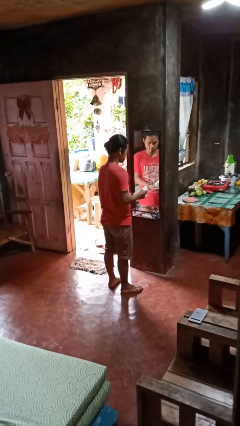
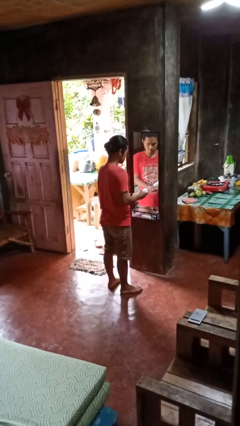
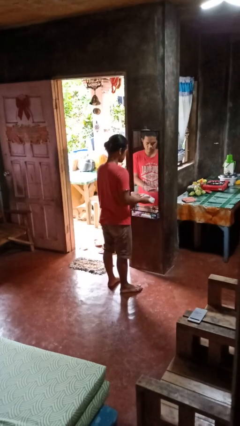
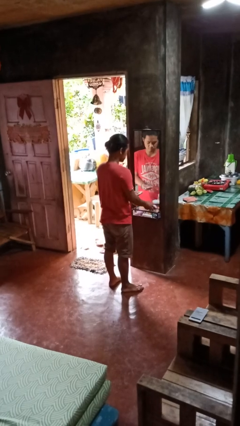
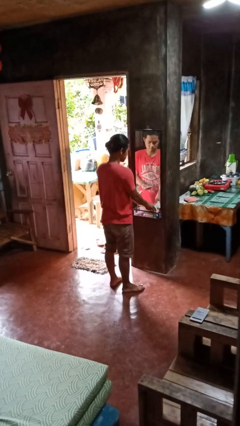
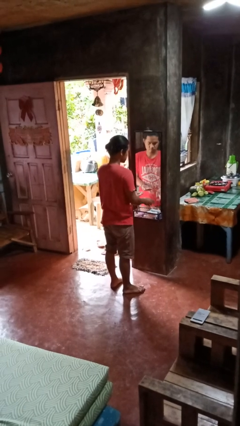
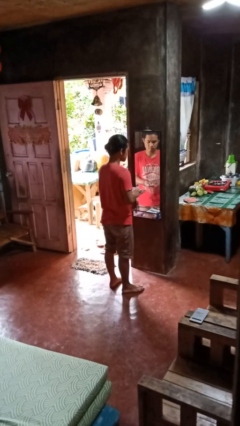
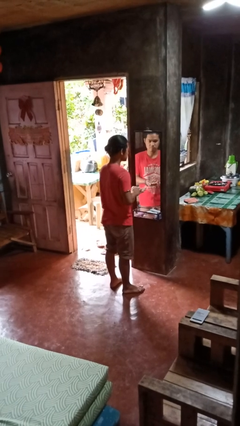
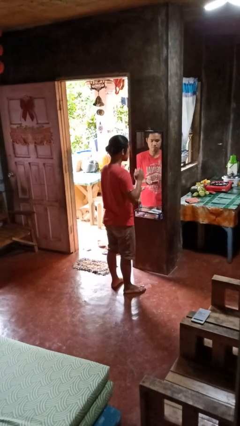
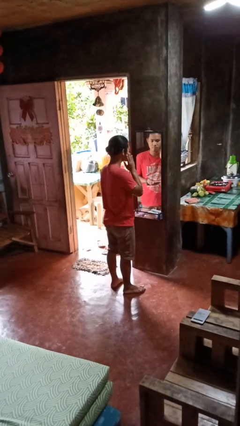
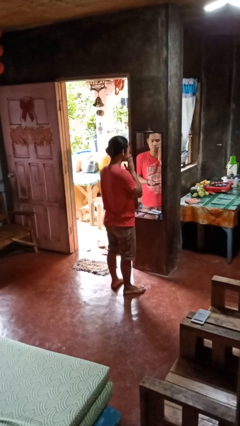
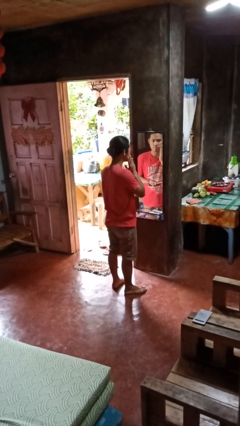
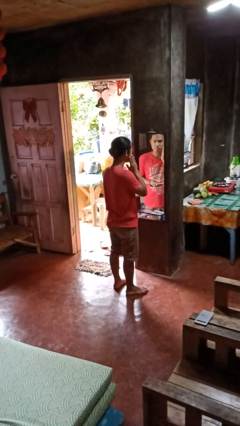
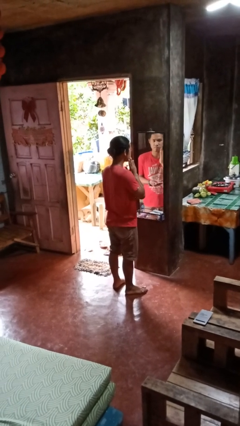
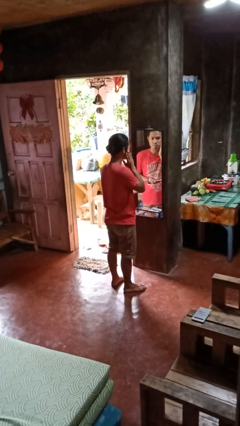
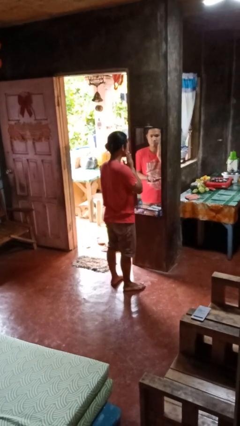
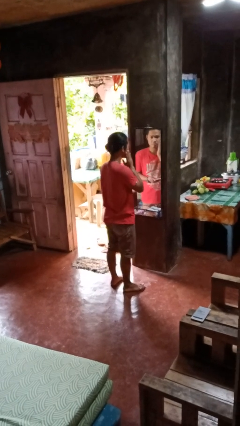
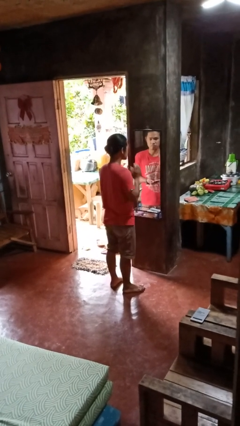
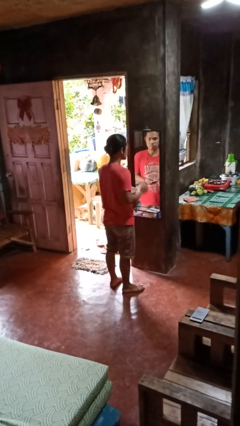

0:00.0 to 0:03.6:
person applies foundation makeup

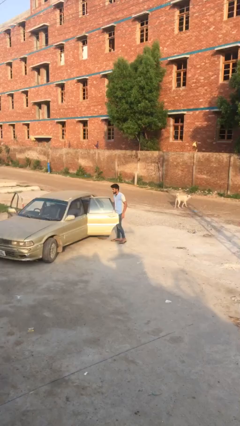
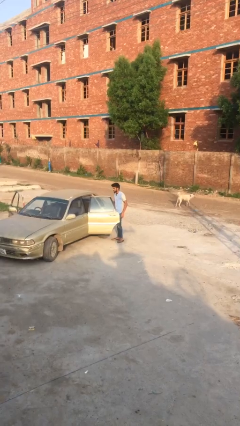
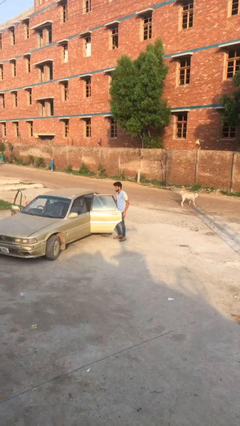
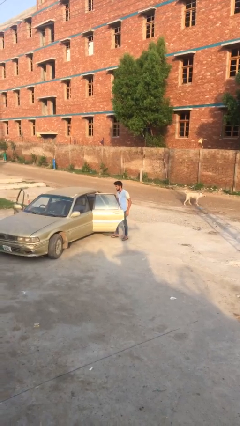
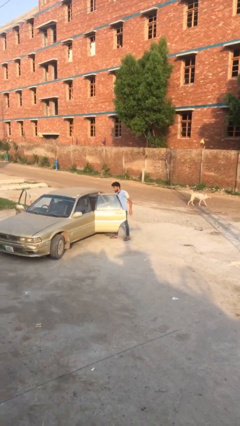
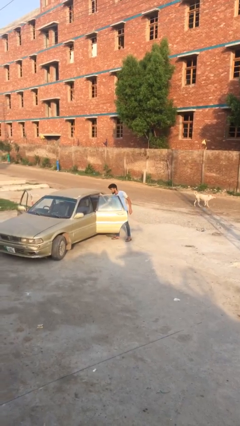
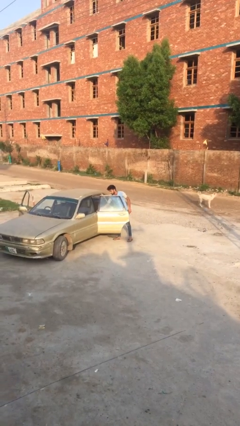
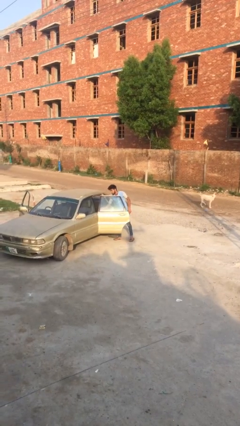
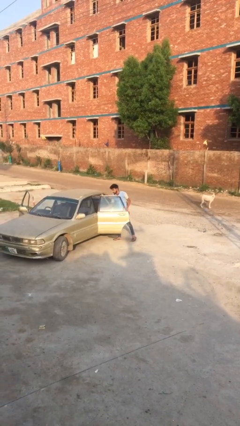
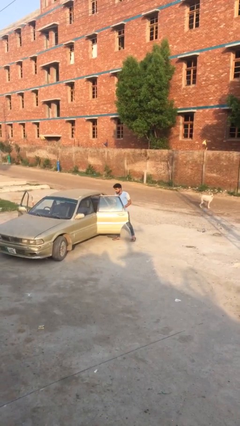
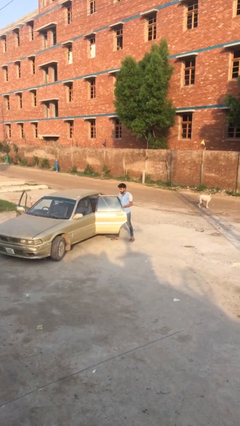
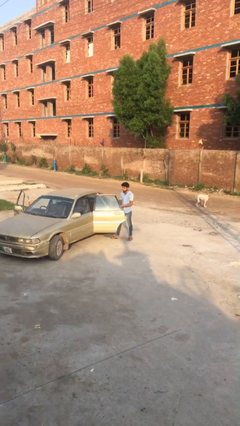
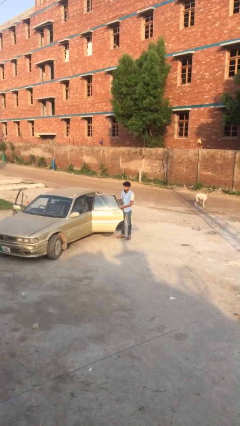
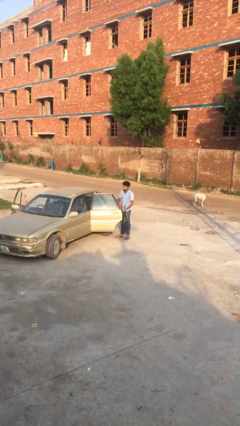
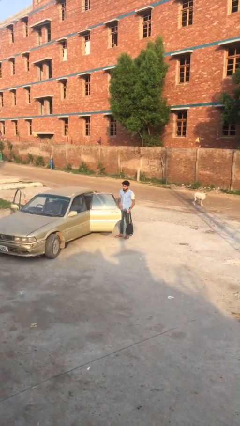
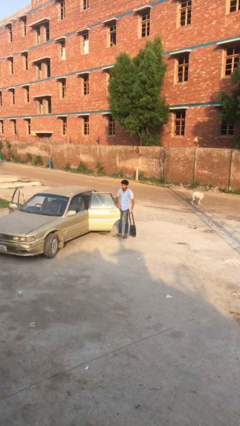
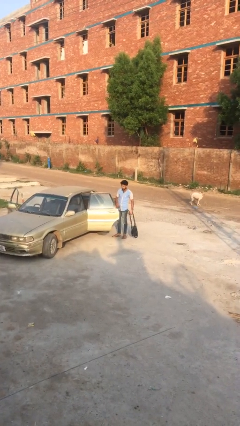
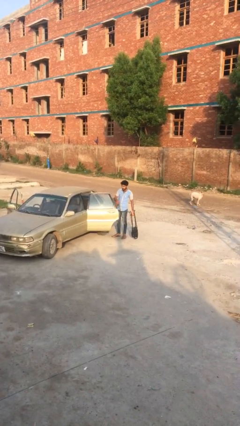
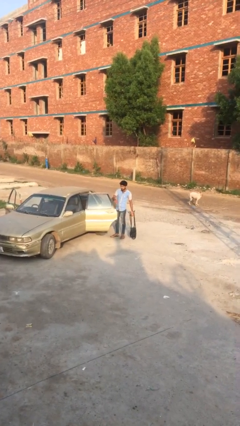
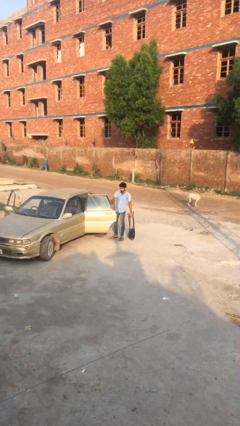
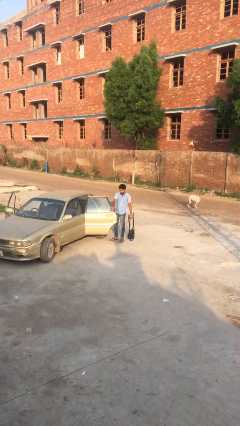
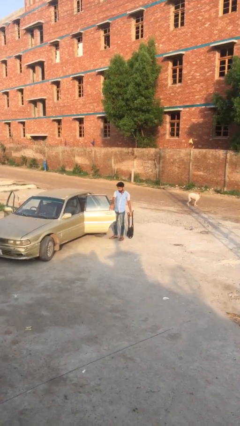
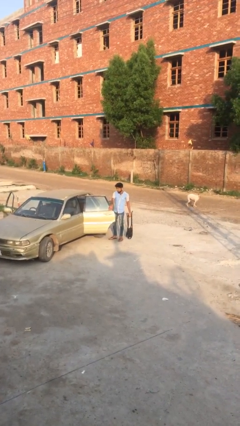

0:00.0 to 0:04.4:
person unloads car

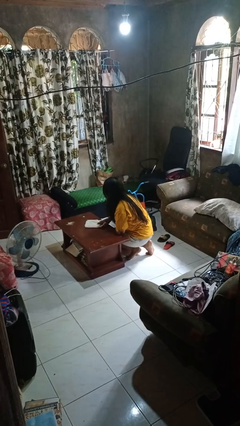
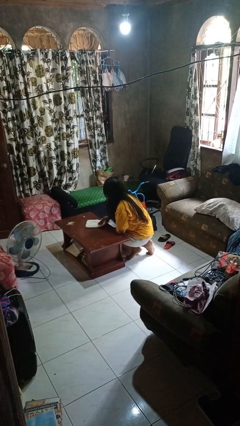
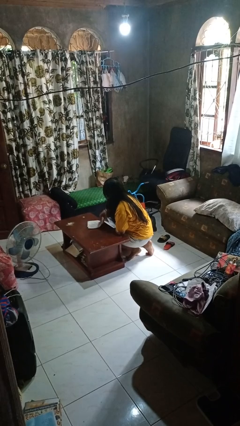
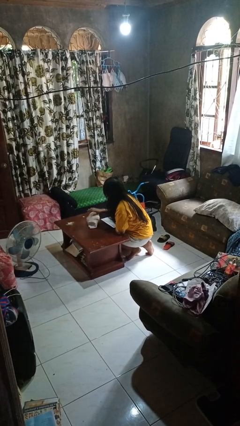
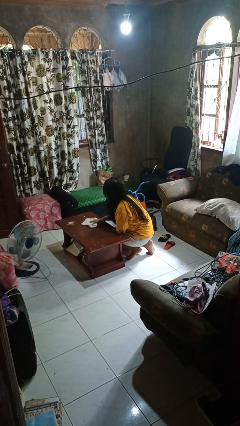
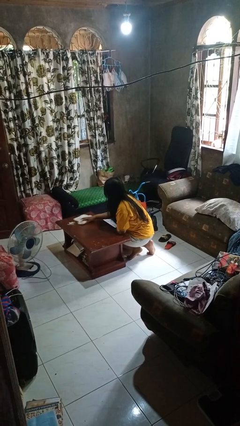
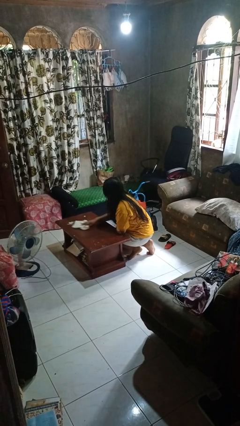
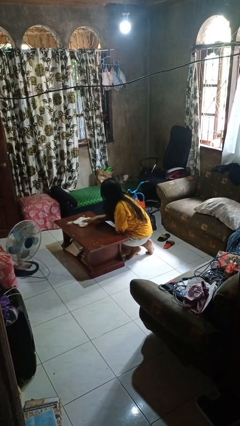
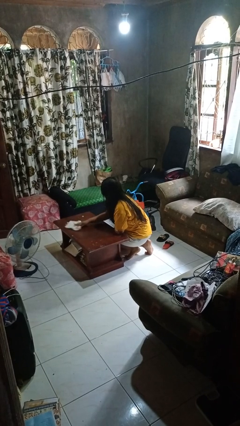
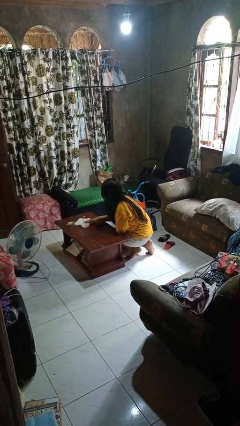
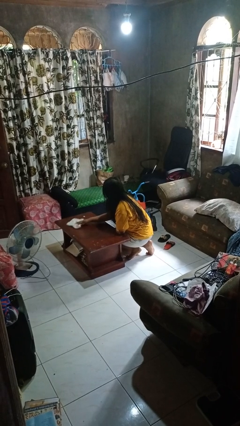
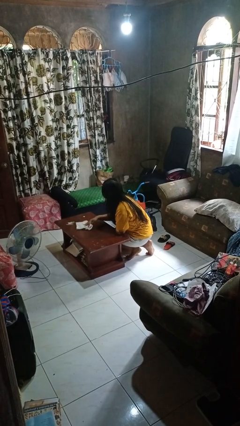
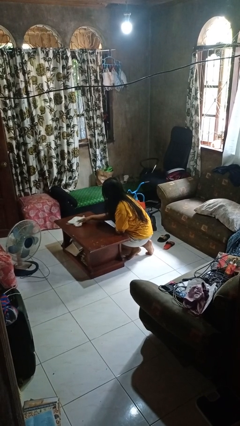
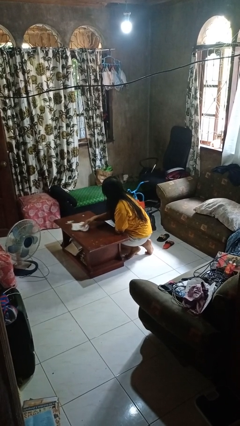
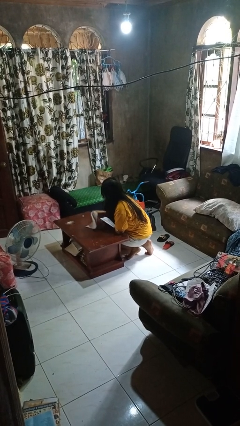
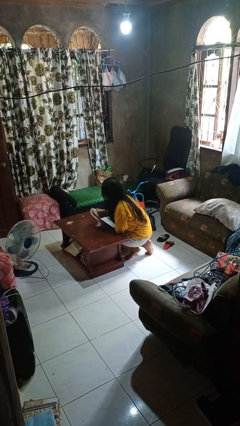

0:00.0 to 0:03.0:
person cleans table with rag

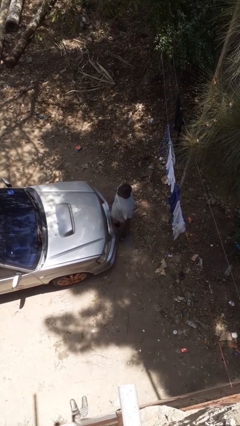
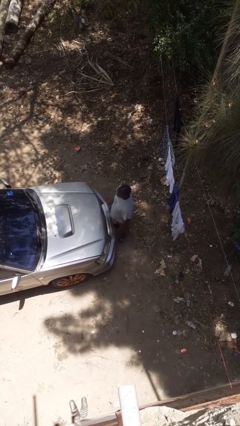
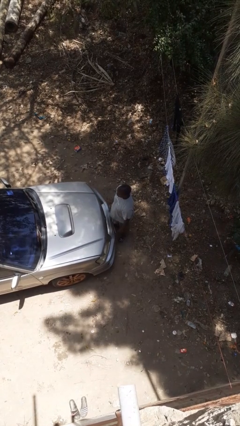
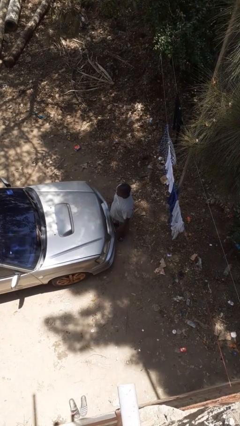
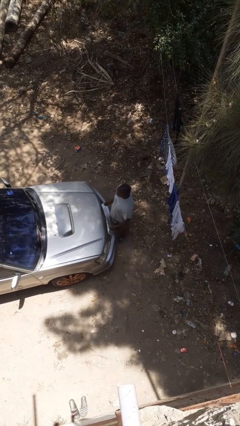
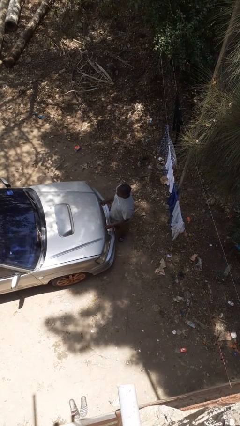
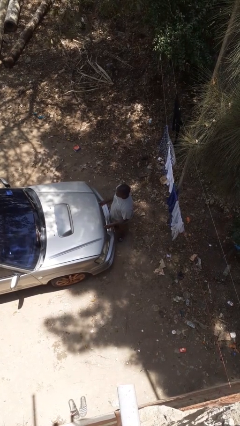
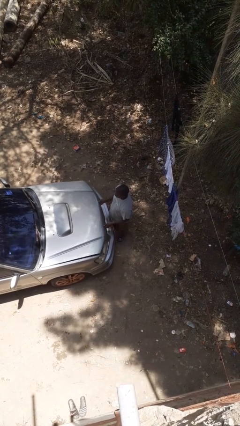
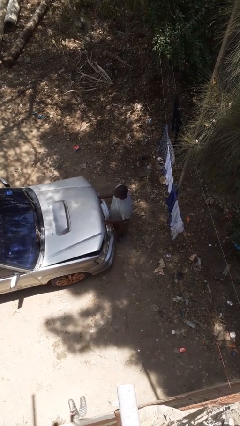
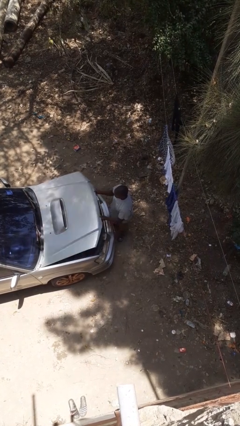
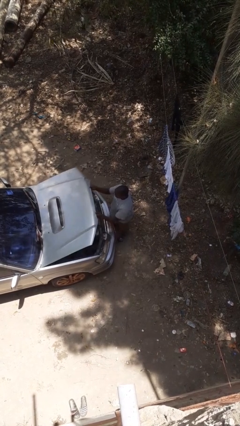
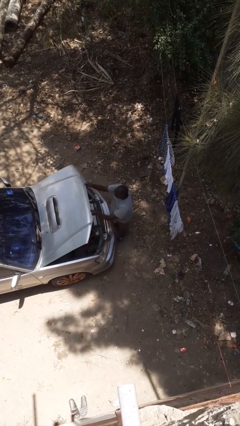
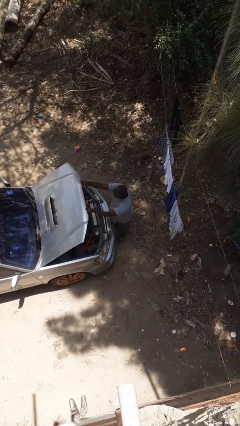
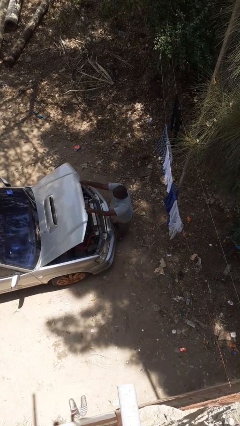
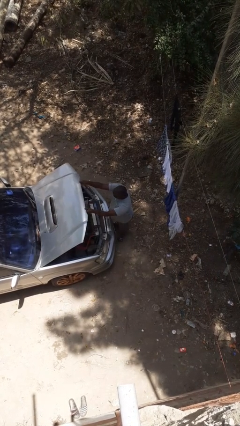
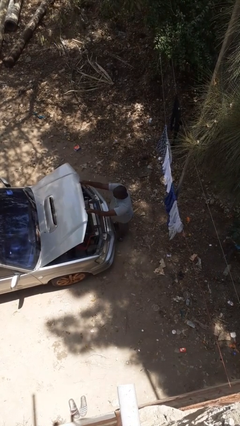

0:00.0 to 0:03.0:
person opens car hood

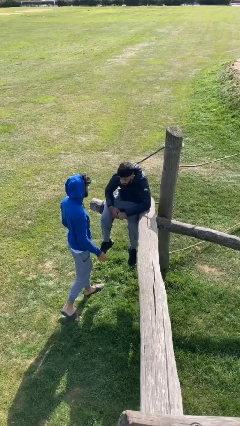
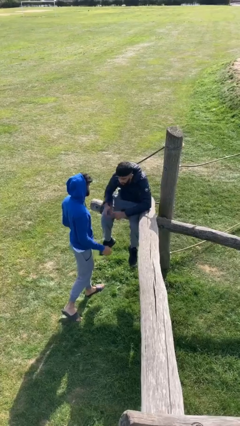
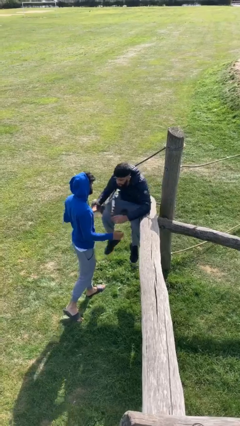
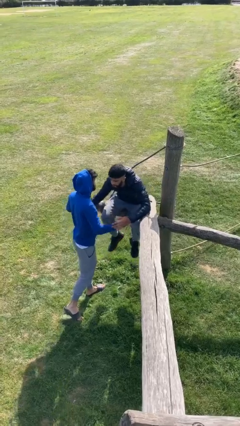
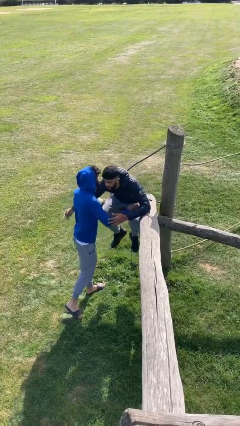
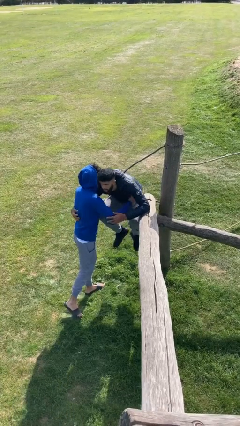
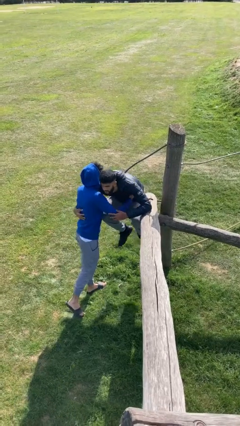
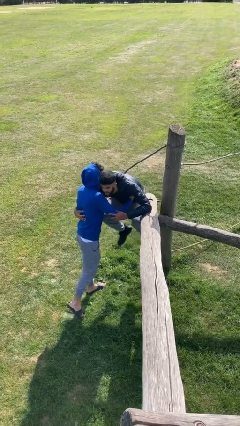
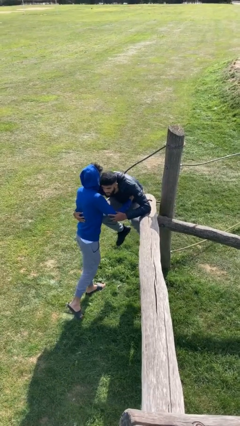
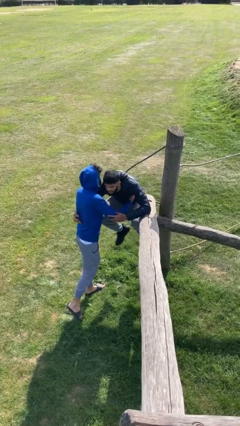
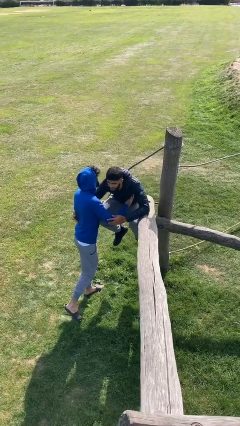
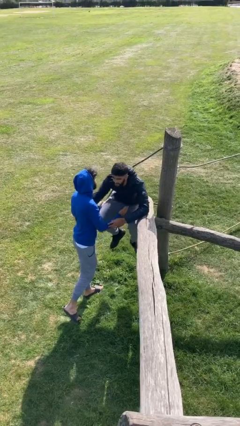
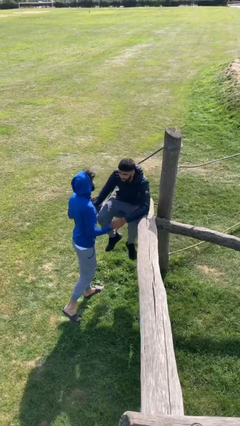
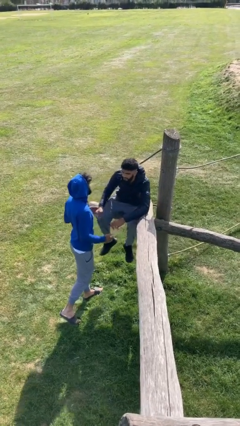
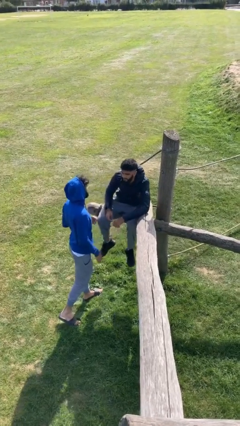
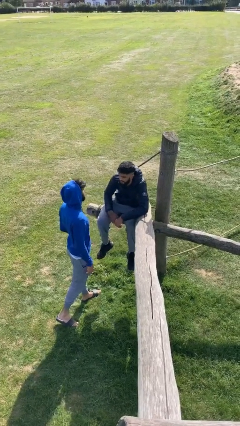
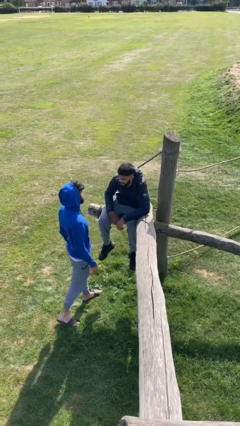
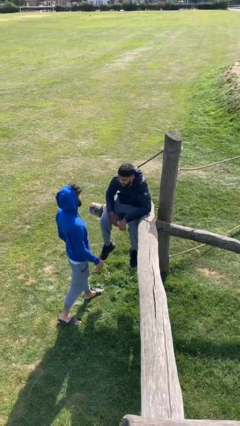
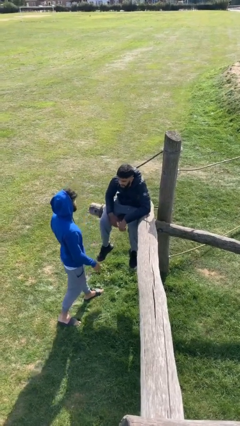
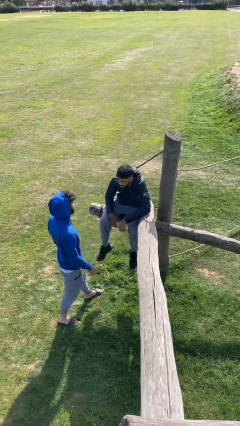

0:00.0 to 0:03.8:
person embraces person
